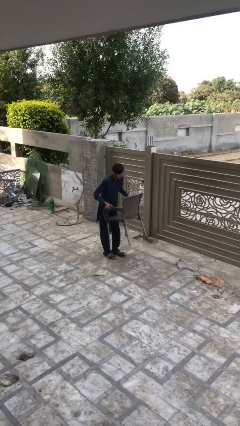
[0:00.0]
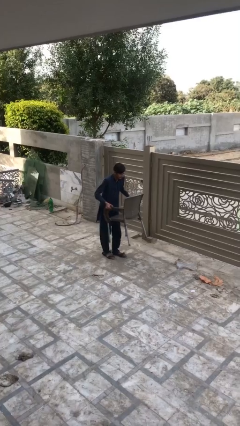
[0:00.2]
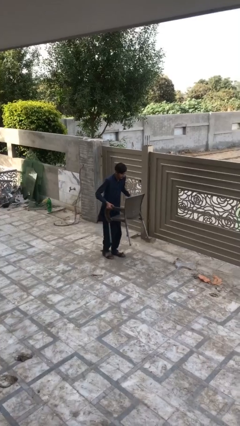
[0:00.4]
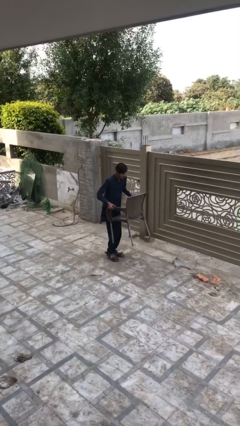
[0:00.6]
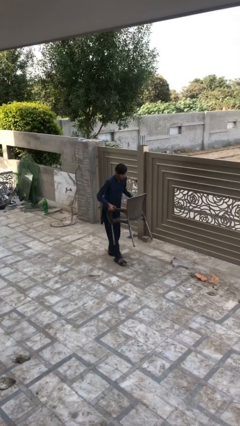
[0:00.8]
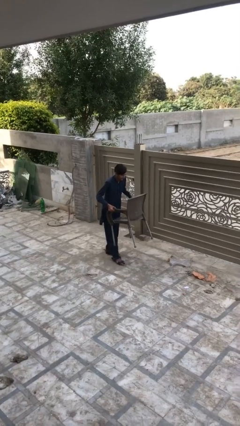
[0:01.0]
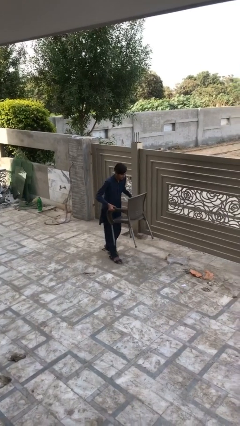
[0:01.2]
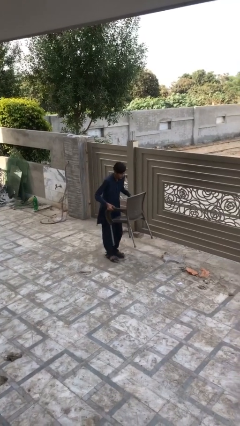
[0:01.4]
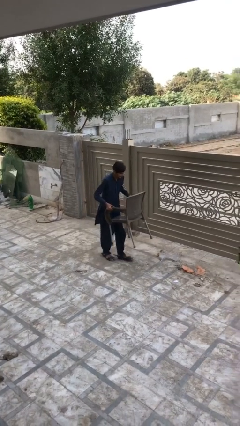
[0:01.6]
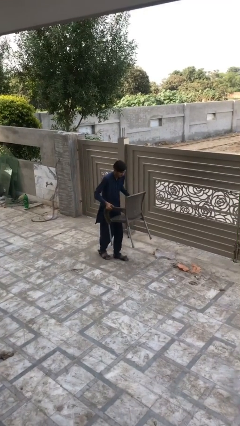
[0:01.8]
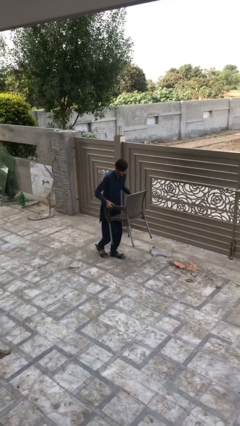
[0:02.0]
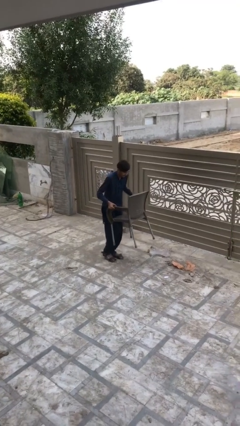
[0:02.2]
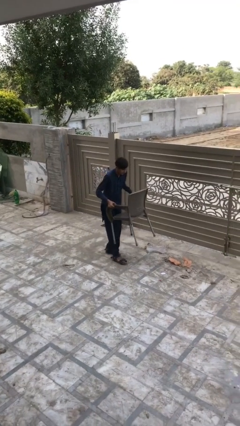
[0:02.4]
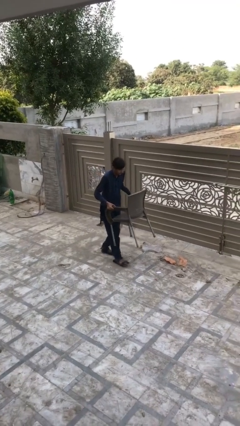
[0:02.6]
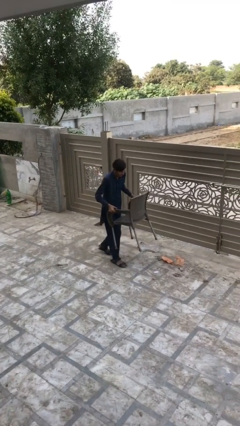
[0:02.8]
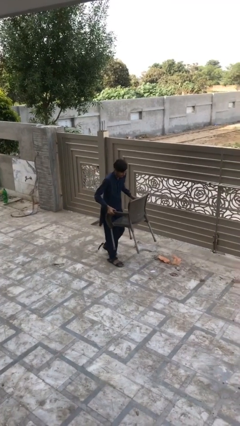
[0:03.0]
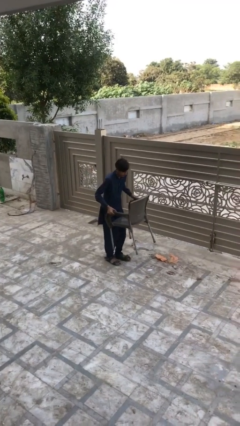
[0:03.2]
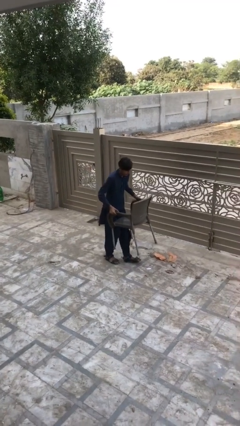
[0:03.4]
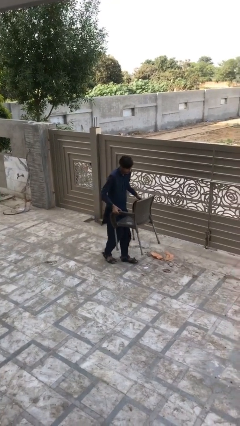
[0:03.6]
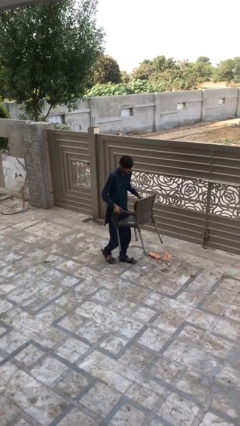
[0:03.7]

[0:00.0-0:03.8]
person carries heavy object

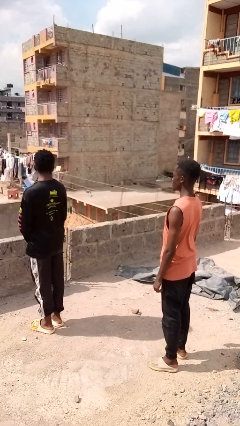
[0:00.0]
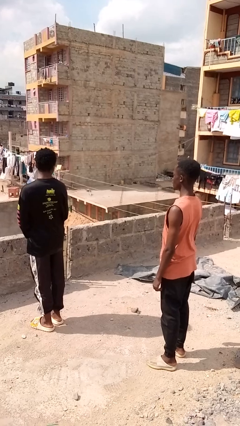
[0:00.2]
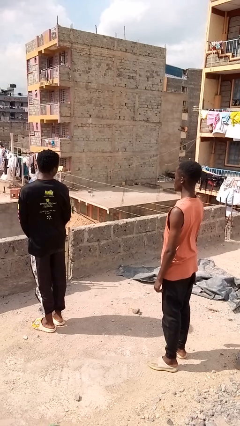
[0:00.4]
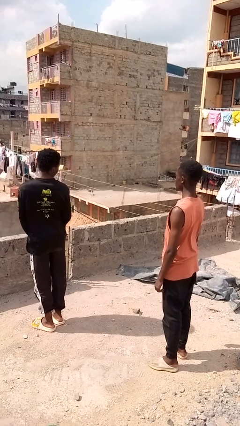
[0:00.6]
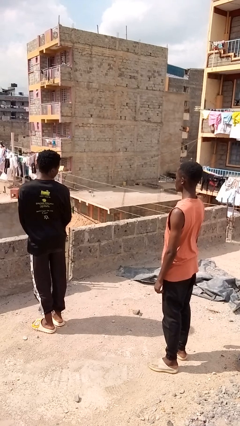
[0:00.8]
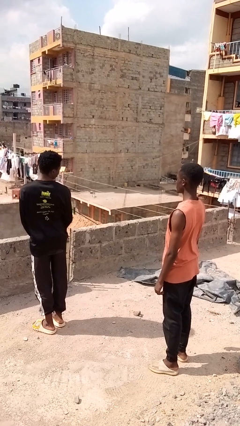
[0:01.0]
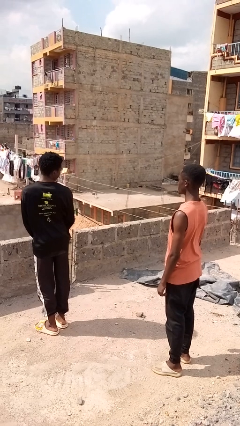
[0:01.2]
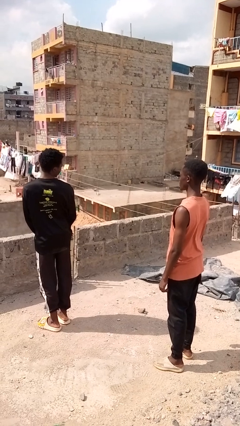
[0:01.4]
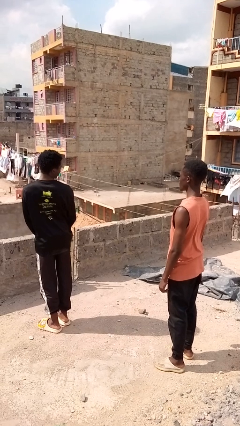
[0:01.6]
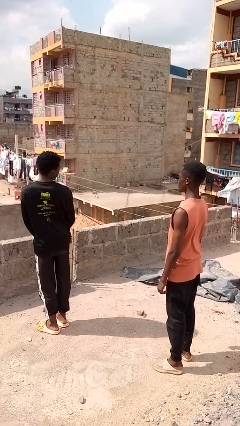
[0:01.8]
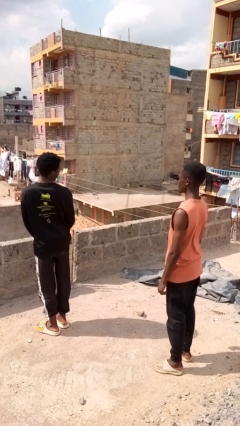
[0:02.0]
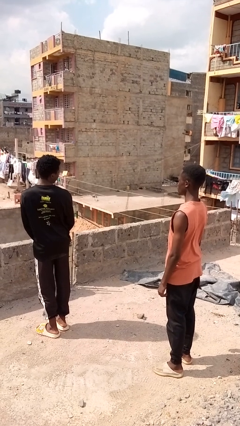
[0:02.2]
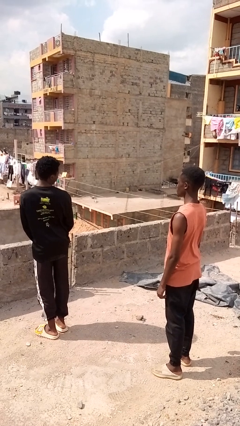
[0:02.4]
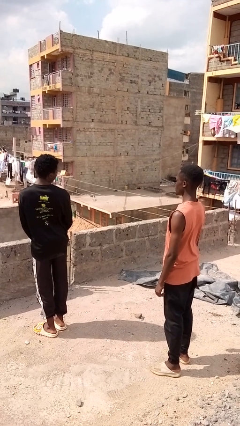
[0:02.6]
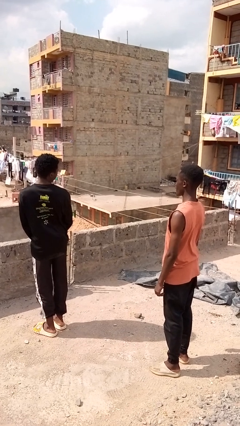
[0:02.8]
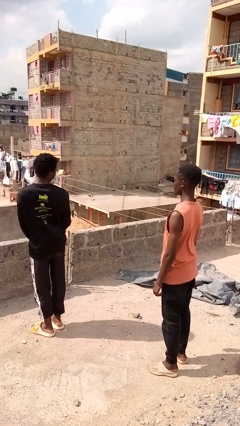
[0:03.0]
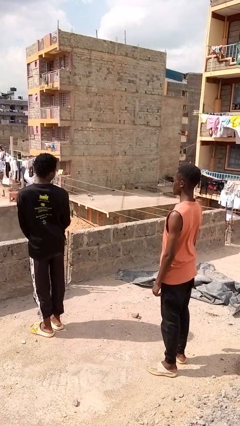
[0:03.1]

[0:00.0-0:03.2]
person looks over shoulder

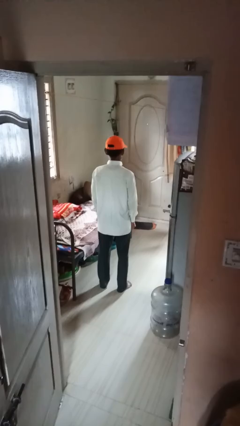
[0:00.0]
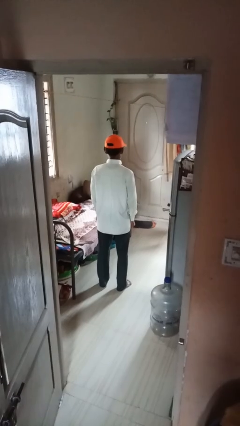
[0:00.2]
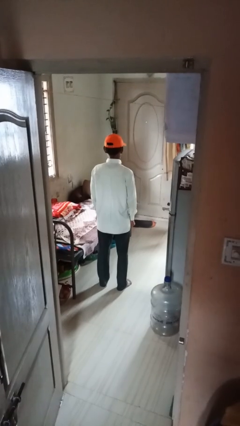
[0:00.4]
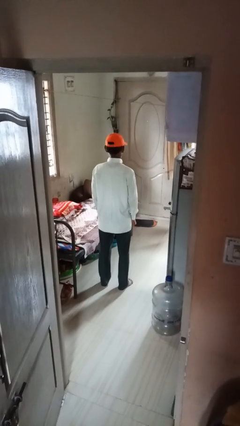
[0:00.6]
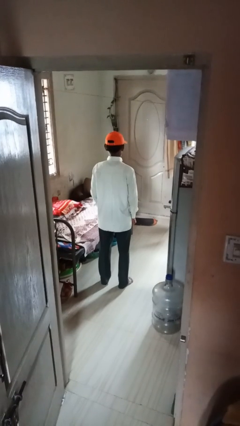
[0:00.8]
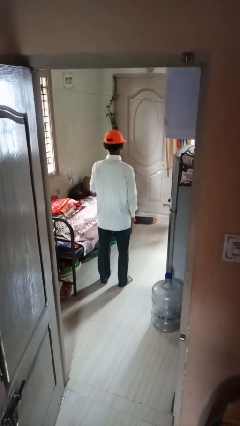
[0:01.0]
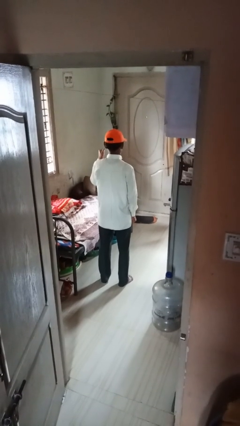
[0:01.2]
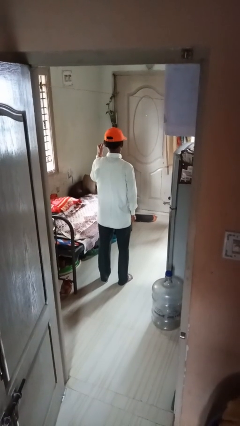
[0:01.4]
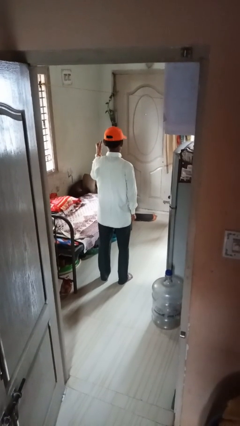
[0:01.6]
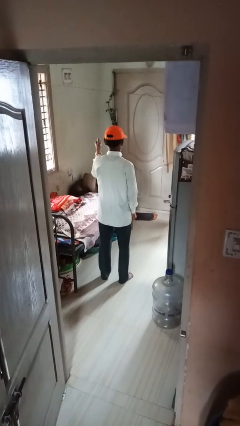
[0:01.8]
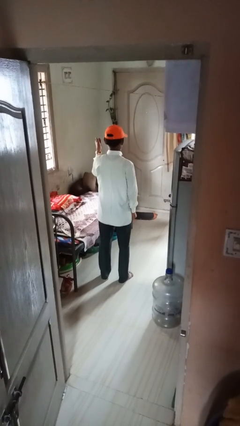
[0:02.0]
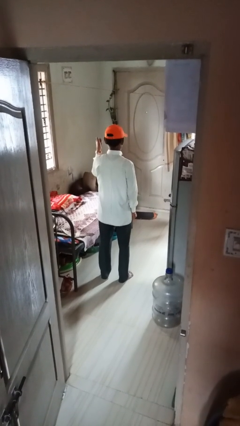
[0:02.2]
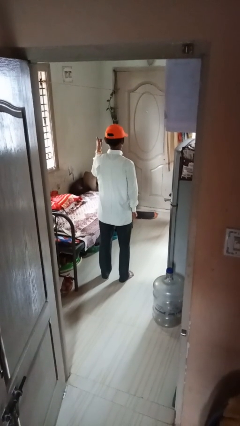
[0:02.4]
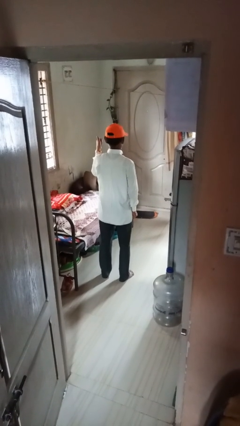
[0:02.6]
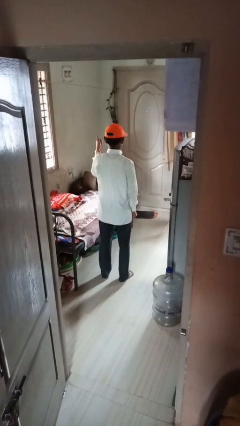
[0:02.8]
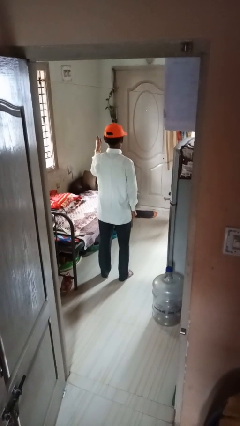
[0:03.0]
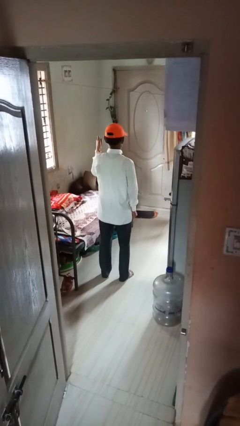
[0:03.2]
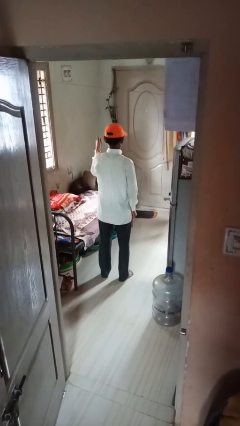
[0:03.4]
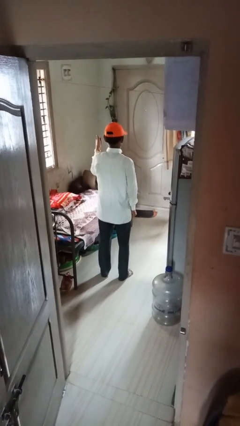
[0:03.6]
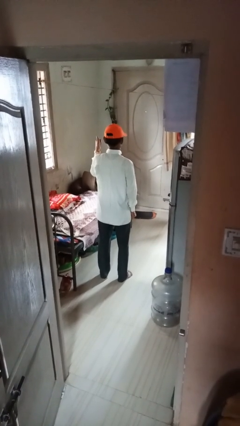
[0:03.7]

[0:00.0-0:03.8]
person gestures thumbs up

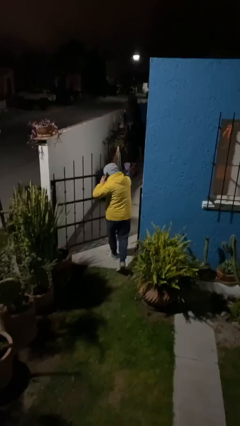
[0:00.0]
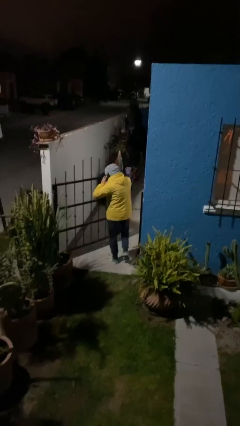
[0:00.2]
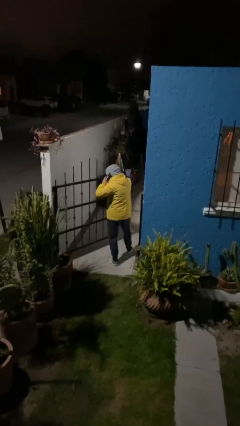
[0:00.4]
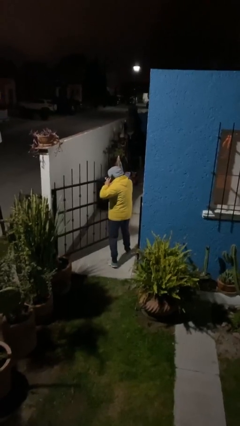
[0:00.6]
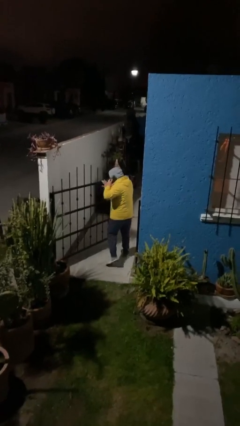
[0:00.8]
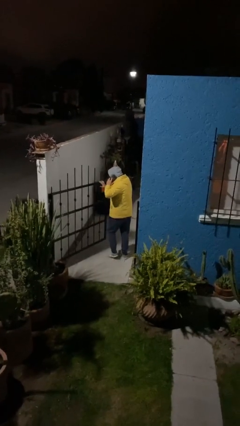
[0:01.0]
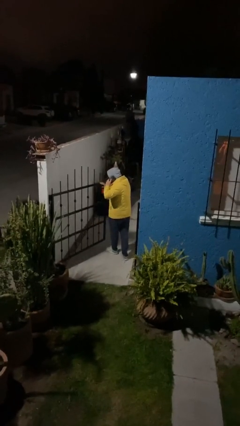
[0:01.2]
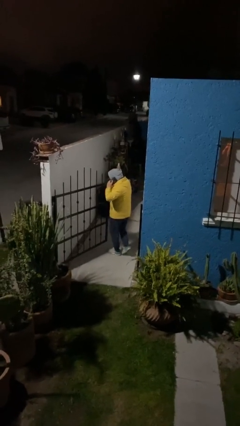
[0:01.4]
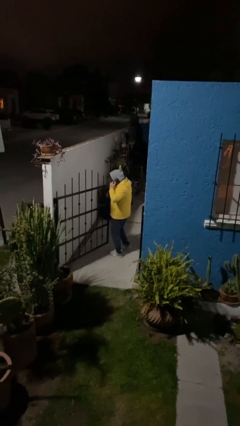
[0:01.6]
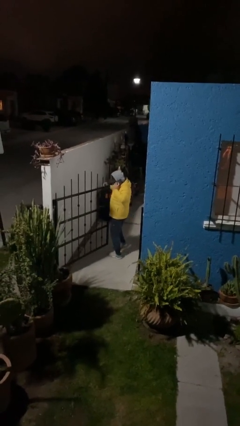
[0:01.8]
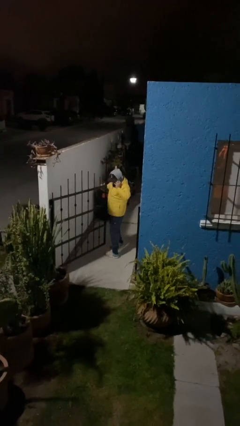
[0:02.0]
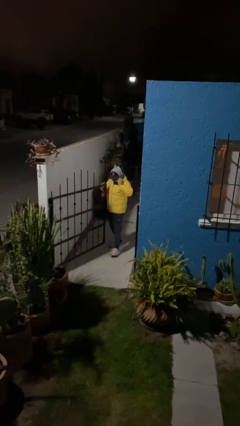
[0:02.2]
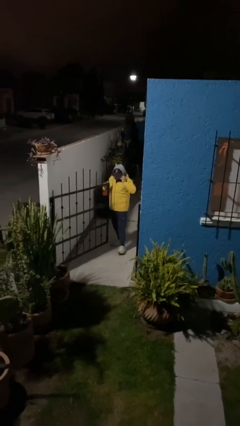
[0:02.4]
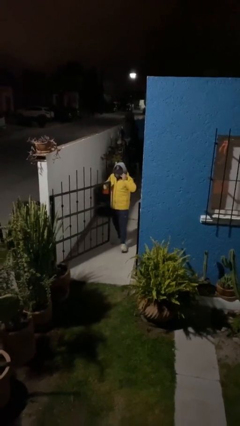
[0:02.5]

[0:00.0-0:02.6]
person exits scene through structure

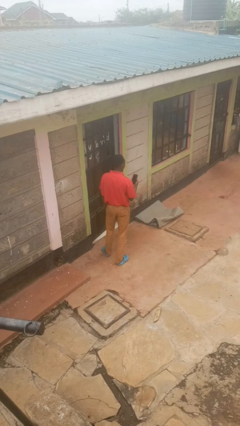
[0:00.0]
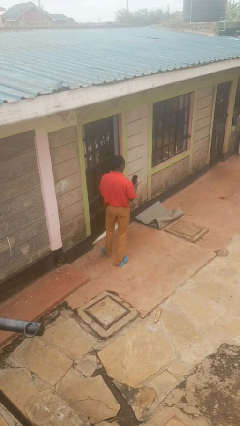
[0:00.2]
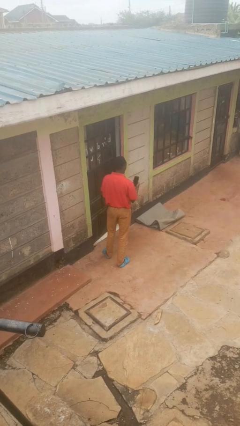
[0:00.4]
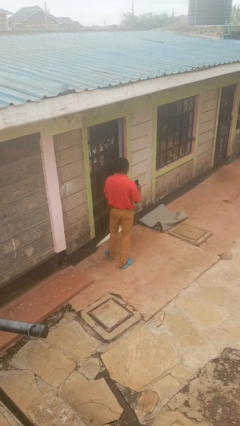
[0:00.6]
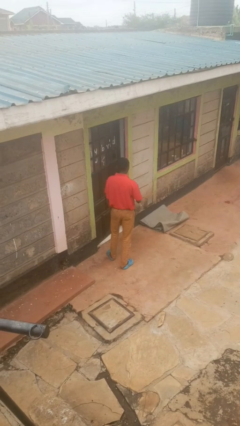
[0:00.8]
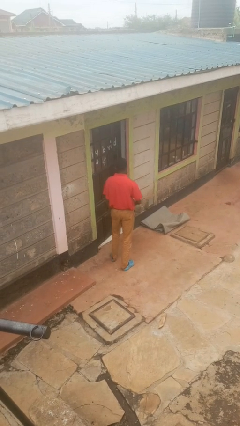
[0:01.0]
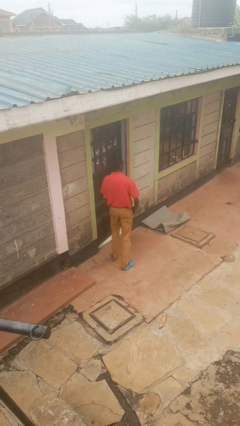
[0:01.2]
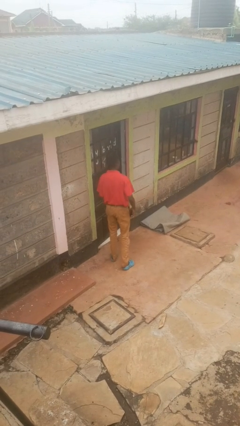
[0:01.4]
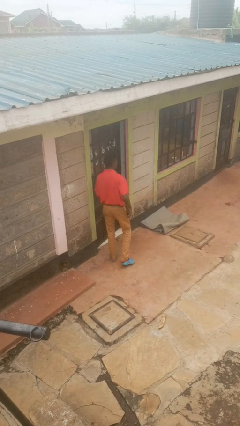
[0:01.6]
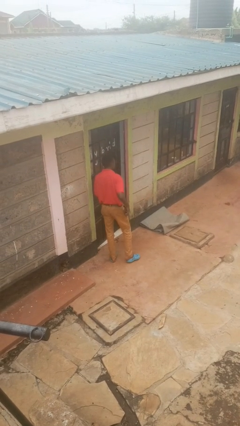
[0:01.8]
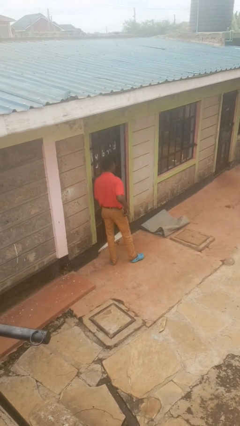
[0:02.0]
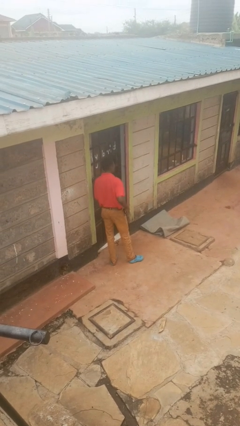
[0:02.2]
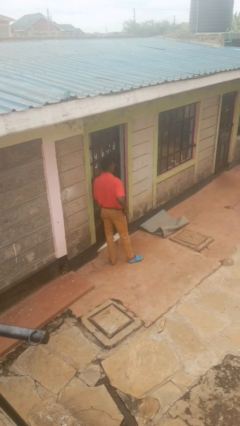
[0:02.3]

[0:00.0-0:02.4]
person puts phone into pocket

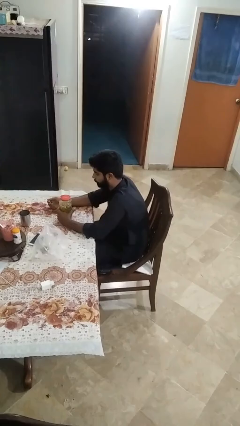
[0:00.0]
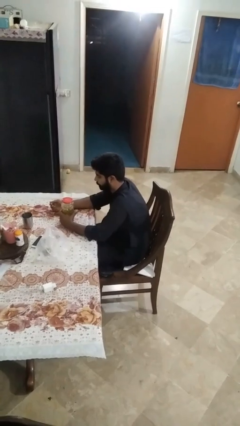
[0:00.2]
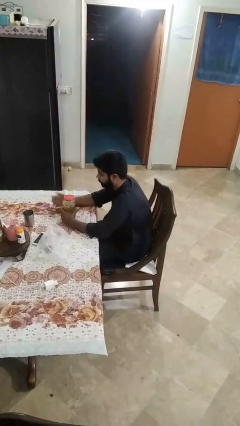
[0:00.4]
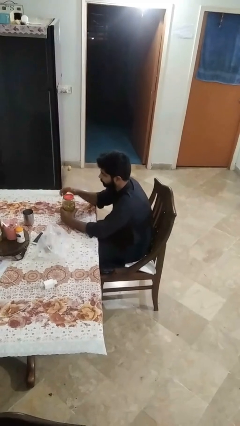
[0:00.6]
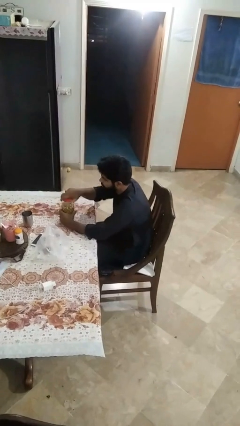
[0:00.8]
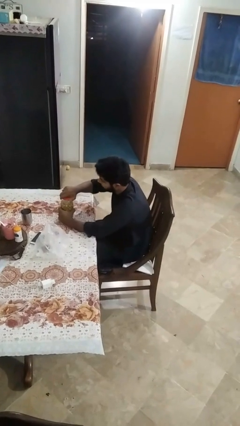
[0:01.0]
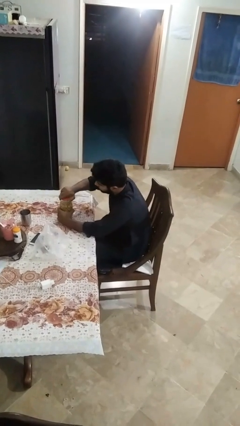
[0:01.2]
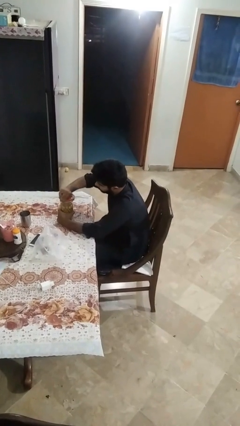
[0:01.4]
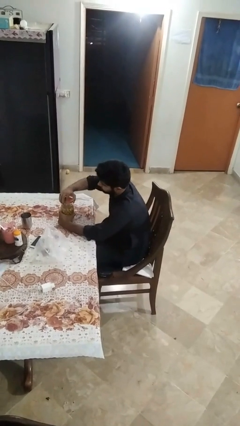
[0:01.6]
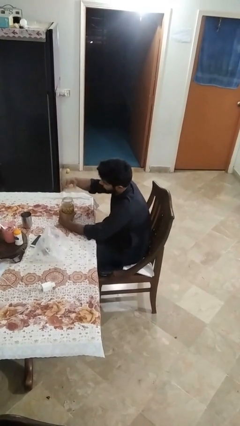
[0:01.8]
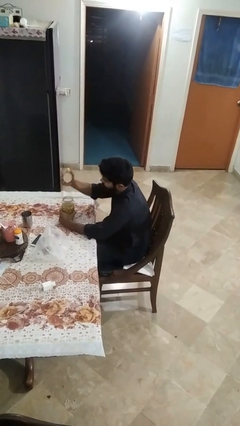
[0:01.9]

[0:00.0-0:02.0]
person opens jar
